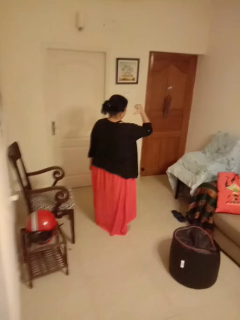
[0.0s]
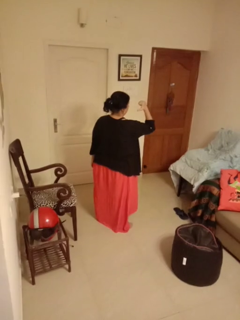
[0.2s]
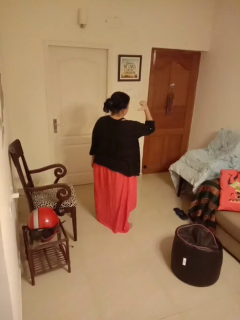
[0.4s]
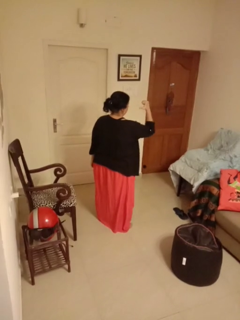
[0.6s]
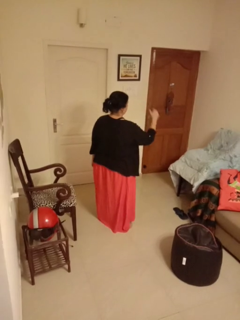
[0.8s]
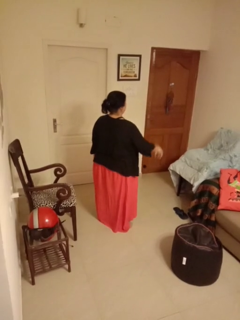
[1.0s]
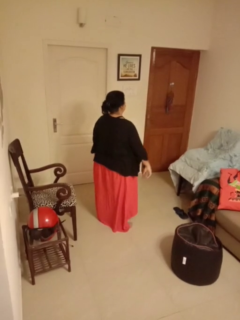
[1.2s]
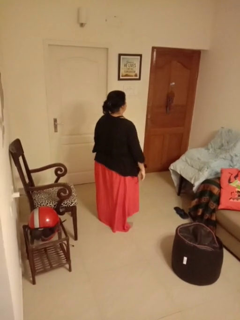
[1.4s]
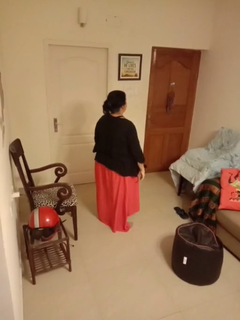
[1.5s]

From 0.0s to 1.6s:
person gestures behind me

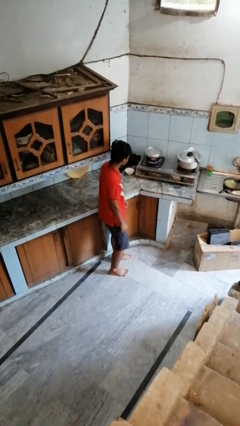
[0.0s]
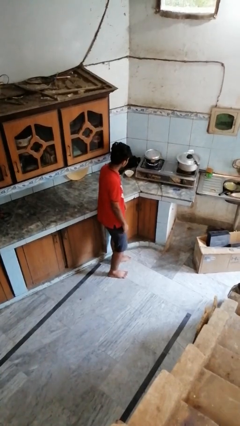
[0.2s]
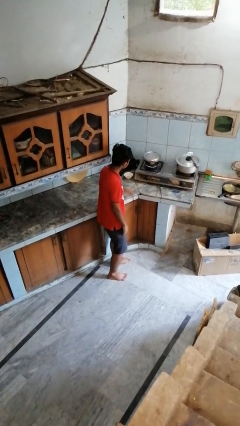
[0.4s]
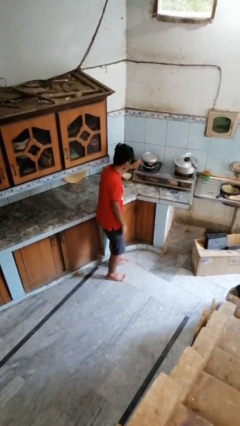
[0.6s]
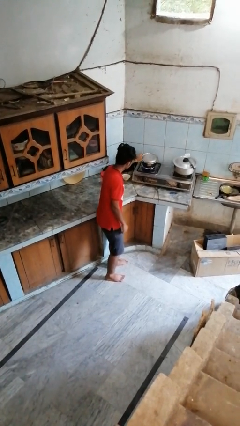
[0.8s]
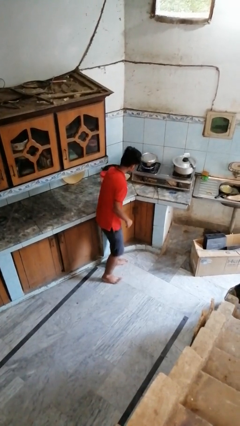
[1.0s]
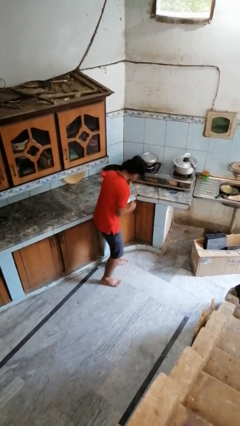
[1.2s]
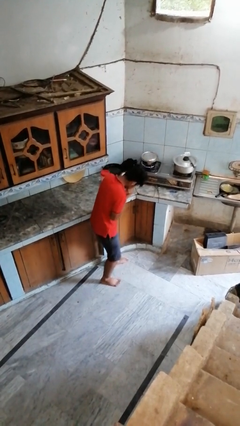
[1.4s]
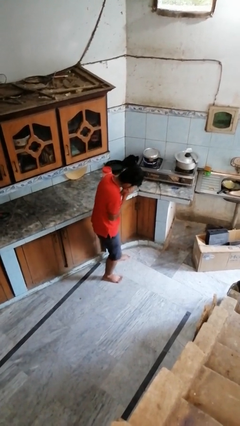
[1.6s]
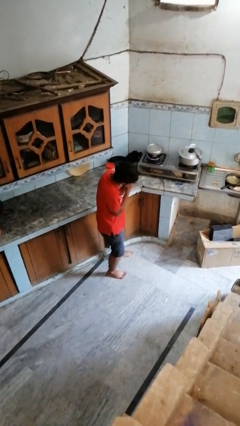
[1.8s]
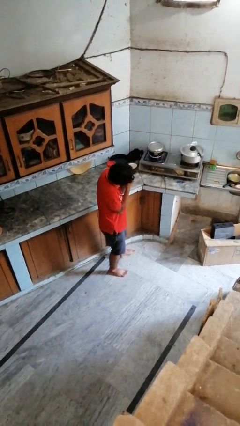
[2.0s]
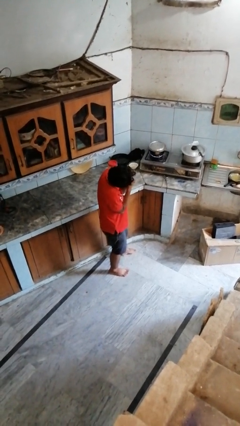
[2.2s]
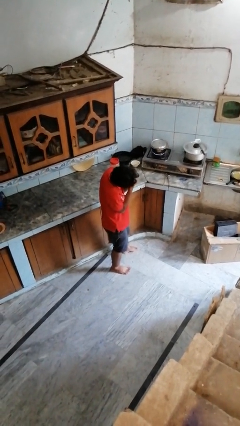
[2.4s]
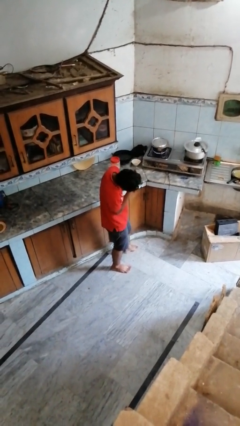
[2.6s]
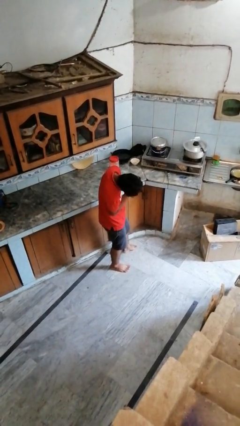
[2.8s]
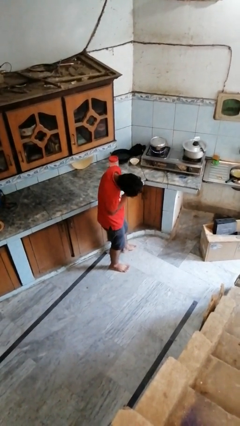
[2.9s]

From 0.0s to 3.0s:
person burns hand

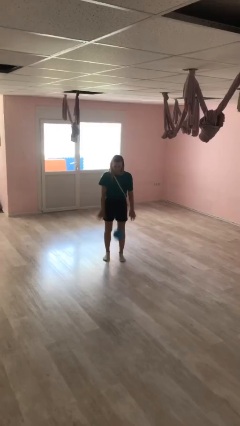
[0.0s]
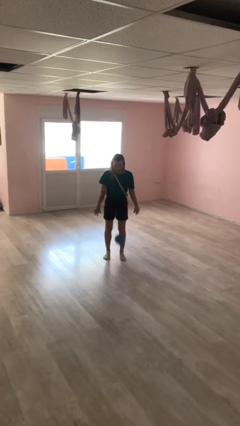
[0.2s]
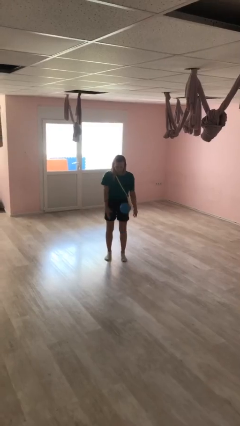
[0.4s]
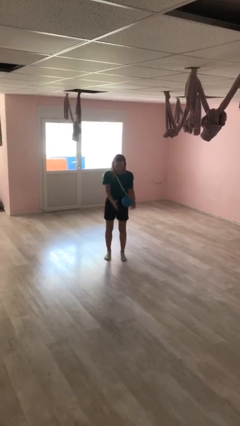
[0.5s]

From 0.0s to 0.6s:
person bounces ball on floor

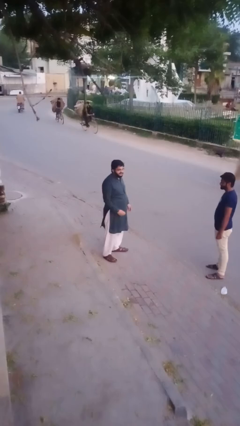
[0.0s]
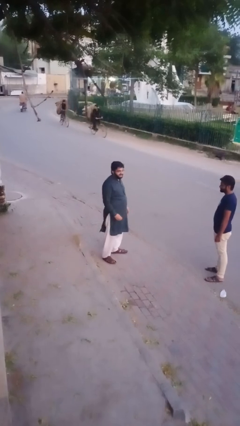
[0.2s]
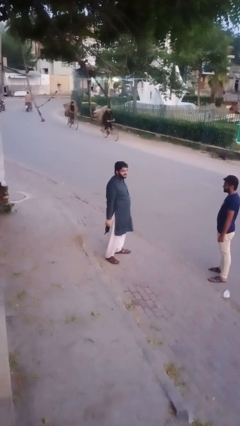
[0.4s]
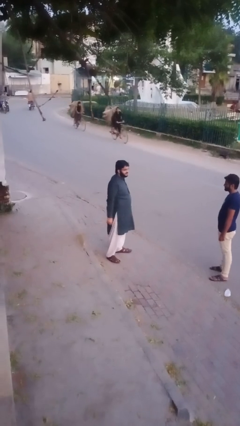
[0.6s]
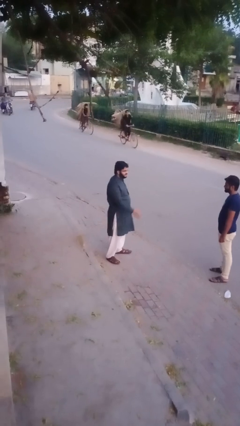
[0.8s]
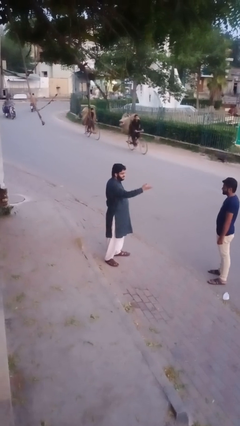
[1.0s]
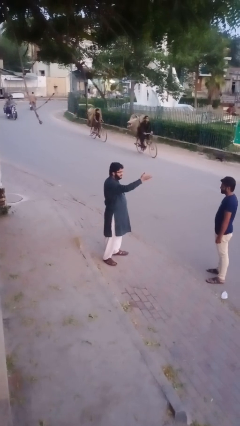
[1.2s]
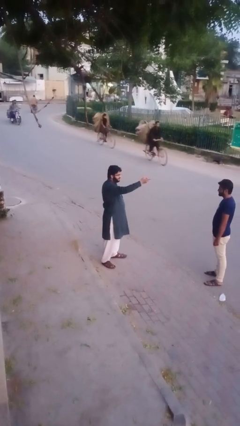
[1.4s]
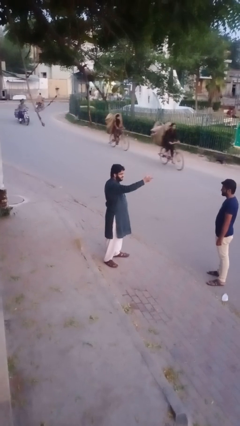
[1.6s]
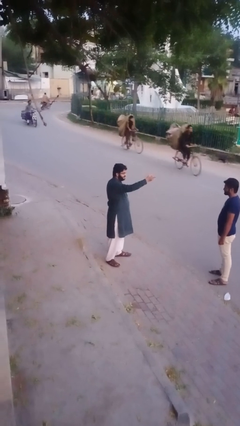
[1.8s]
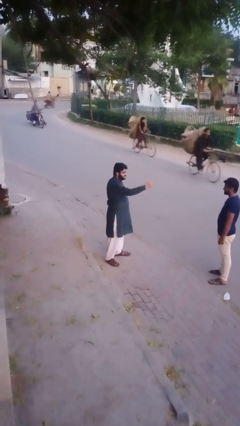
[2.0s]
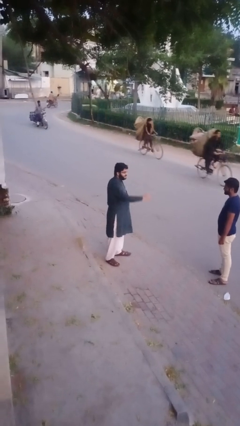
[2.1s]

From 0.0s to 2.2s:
person points at person

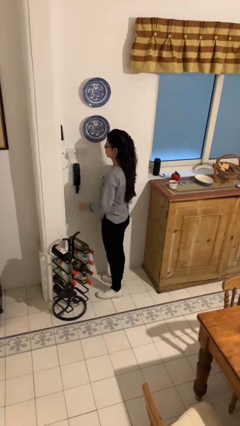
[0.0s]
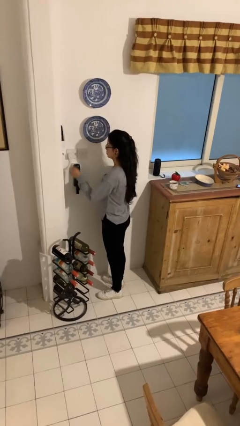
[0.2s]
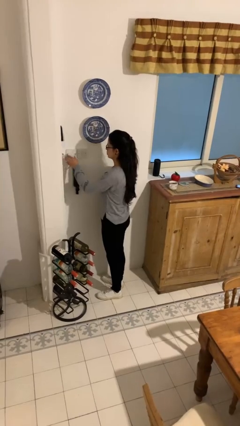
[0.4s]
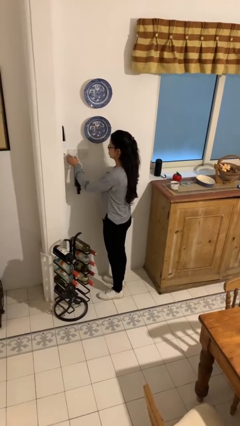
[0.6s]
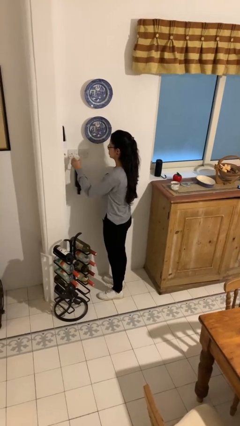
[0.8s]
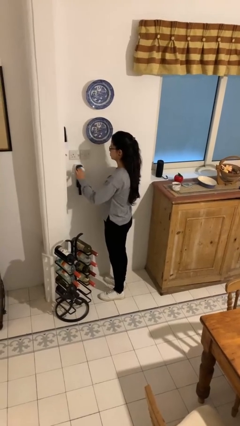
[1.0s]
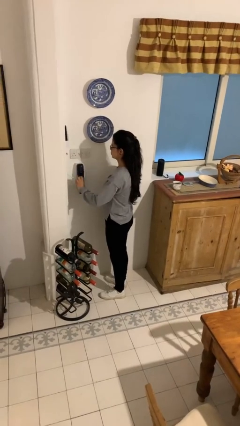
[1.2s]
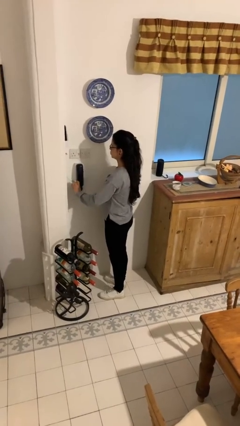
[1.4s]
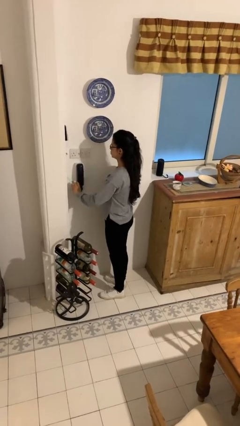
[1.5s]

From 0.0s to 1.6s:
person unplugs from electrical socket

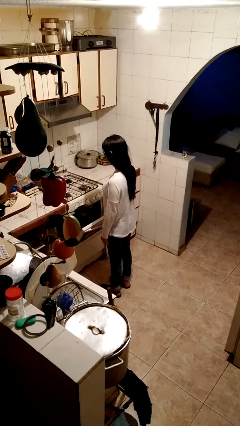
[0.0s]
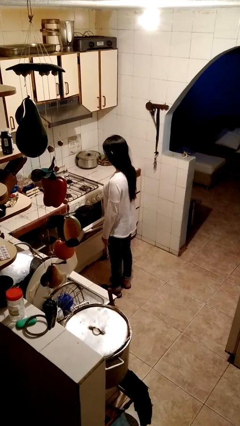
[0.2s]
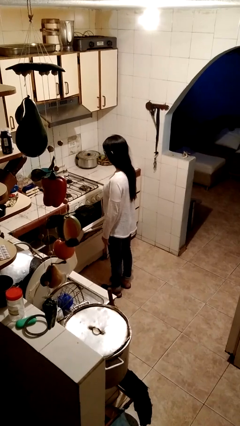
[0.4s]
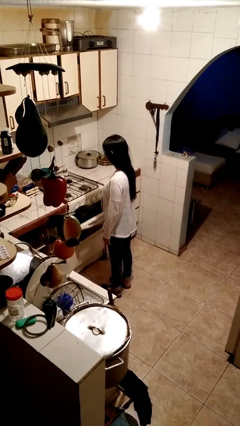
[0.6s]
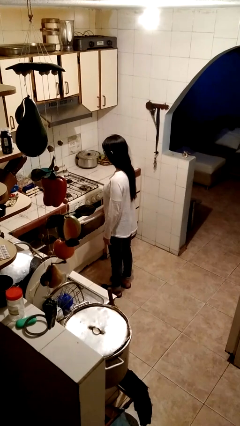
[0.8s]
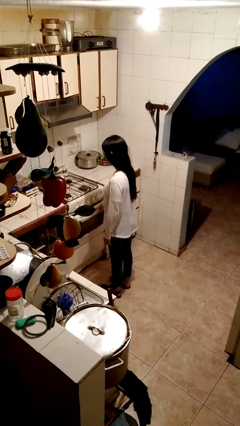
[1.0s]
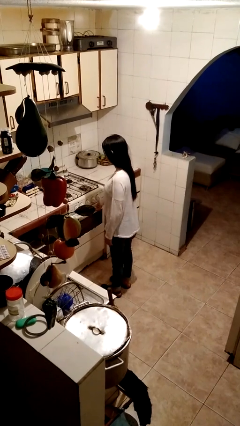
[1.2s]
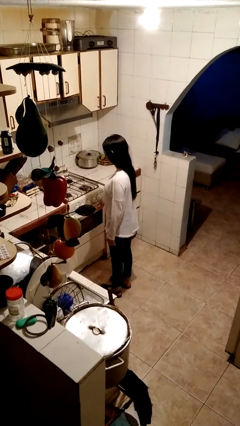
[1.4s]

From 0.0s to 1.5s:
person closes oven door

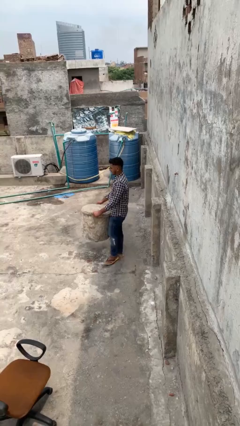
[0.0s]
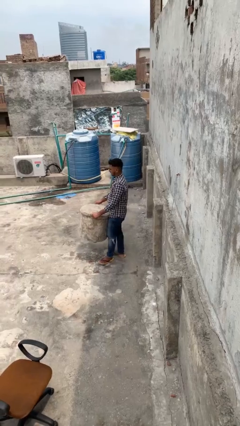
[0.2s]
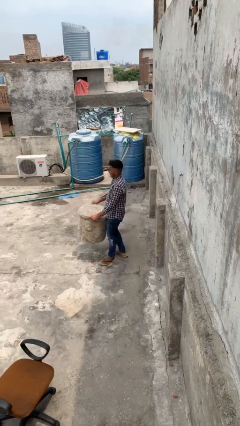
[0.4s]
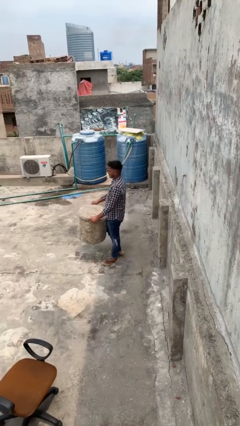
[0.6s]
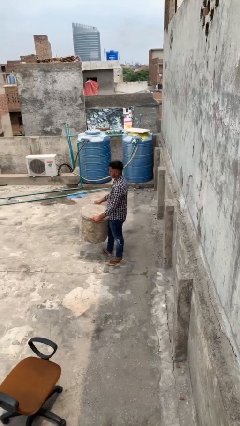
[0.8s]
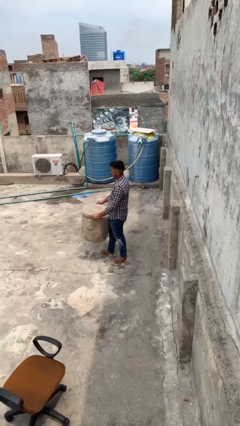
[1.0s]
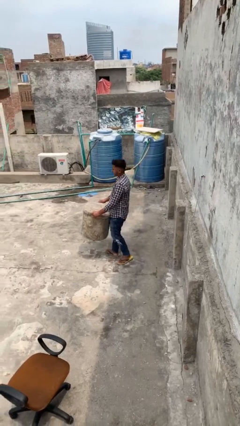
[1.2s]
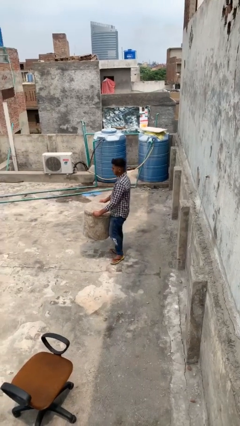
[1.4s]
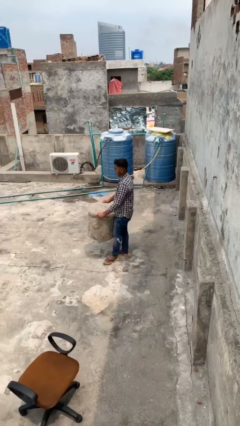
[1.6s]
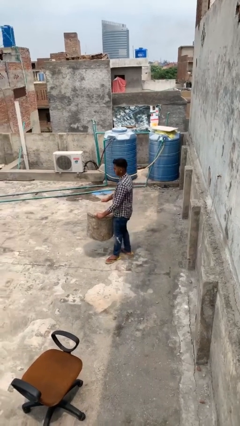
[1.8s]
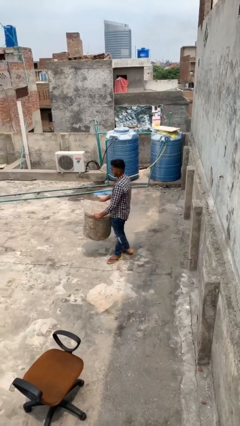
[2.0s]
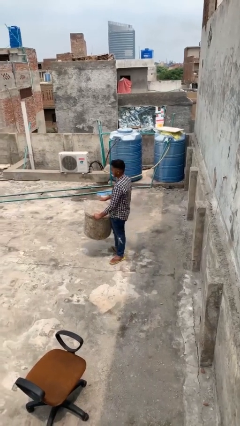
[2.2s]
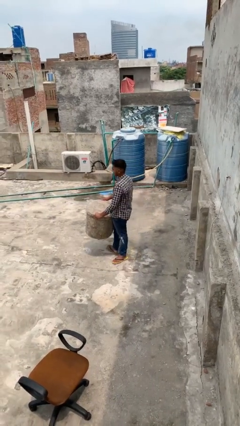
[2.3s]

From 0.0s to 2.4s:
person carries heavy object

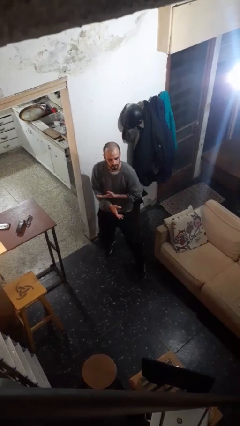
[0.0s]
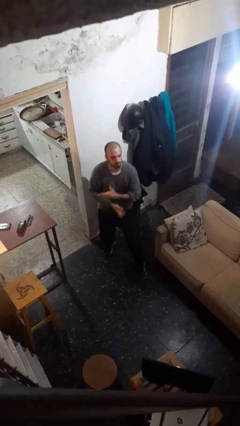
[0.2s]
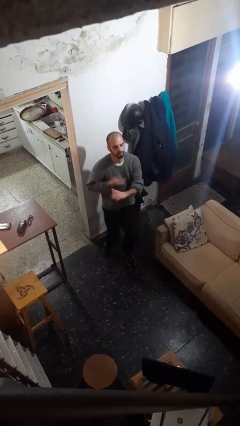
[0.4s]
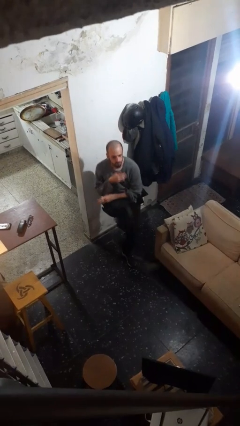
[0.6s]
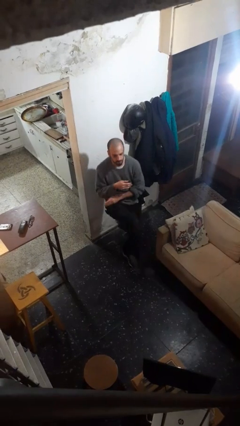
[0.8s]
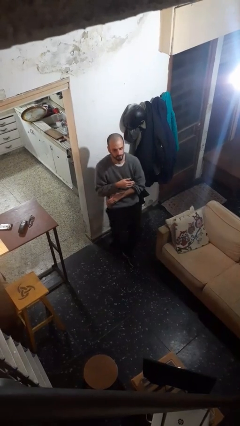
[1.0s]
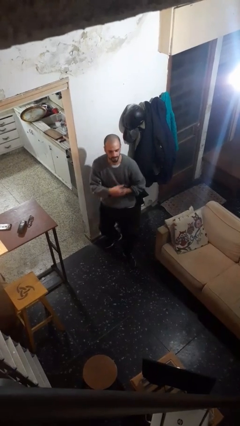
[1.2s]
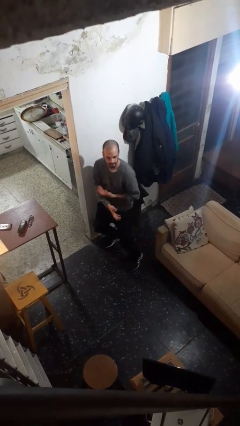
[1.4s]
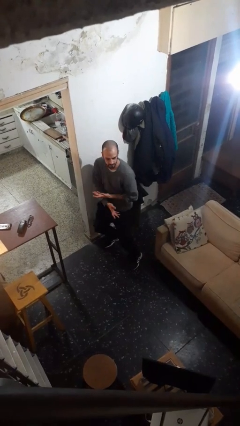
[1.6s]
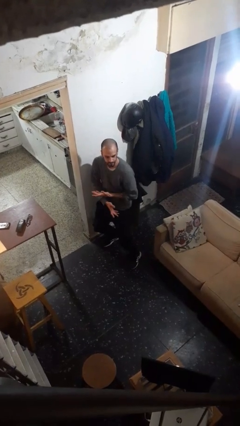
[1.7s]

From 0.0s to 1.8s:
person karate kicks

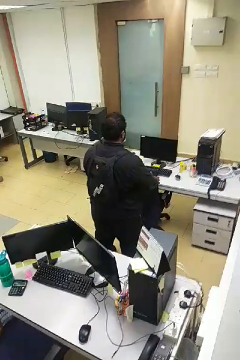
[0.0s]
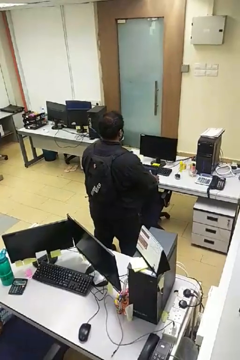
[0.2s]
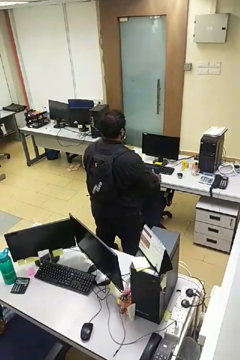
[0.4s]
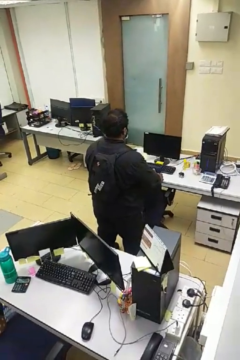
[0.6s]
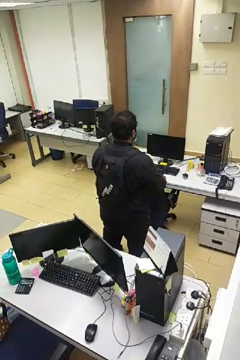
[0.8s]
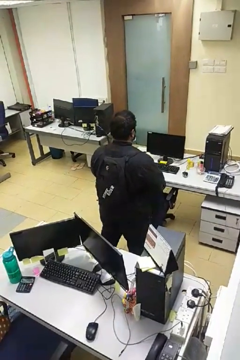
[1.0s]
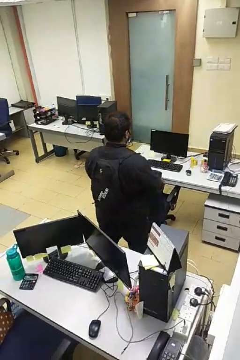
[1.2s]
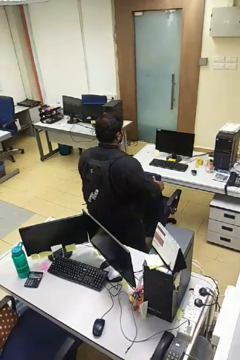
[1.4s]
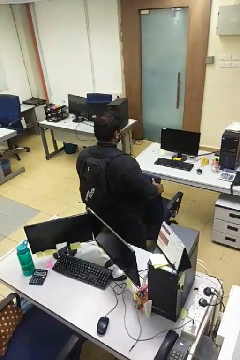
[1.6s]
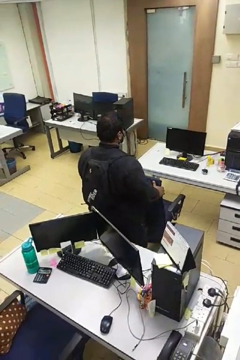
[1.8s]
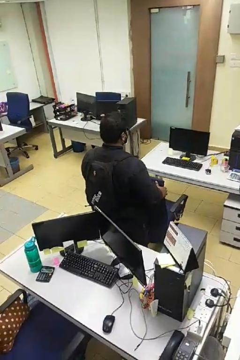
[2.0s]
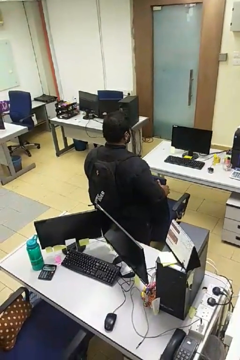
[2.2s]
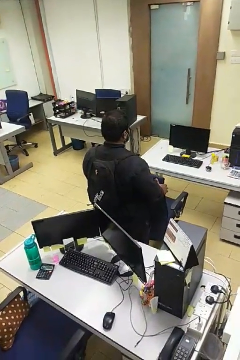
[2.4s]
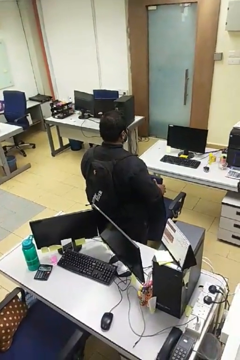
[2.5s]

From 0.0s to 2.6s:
person pulls out chair

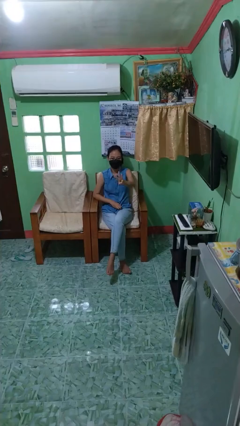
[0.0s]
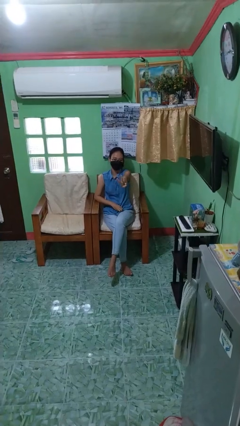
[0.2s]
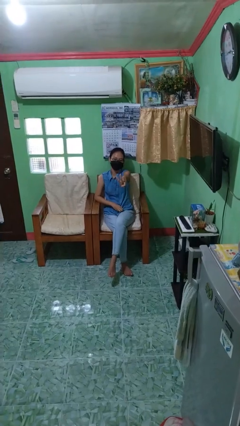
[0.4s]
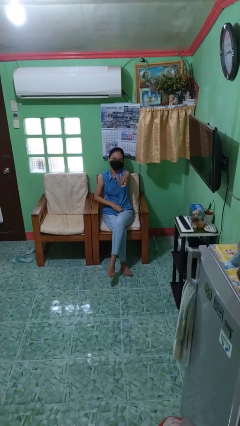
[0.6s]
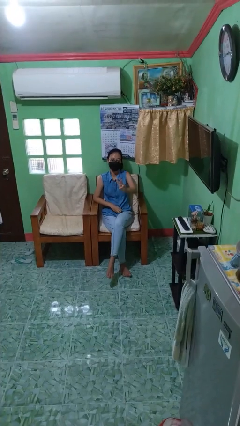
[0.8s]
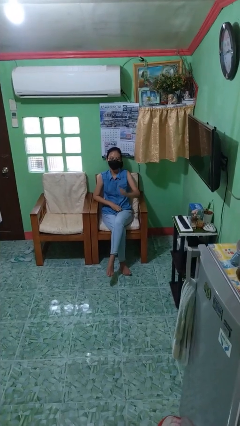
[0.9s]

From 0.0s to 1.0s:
person gestures number three
